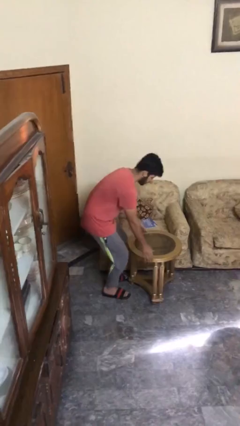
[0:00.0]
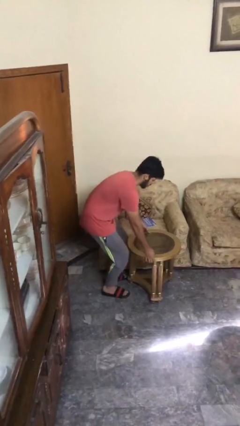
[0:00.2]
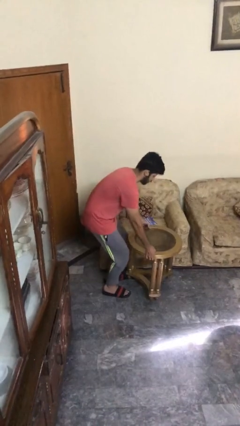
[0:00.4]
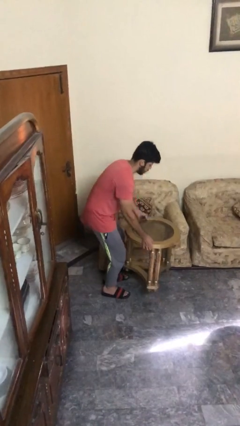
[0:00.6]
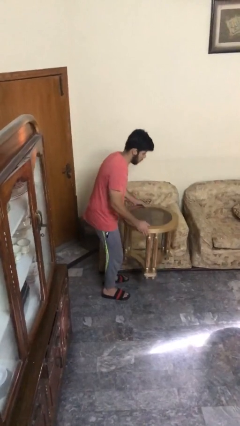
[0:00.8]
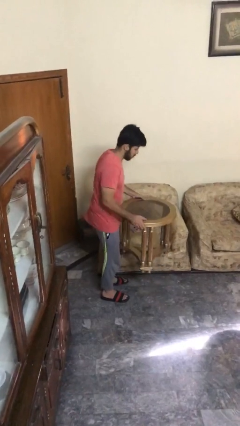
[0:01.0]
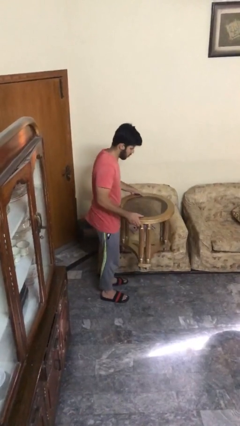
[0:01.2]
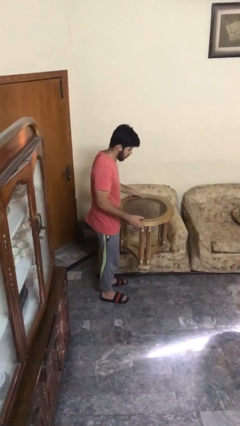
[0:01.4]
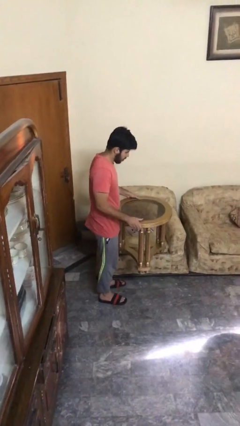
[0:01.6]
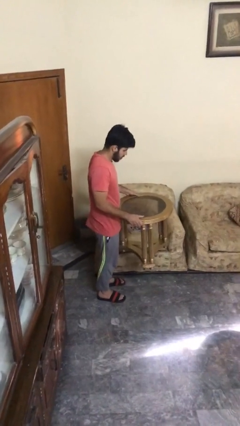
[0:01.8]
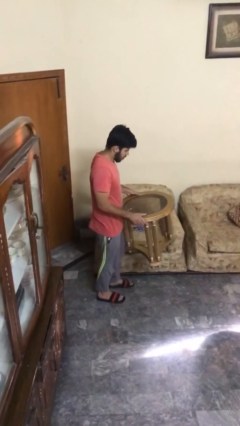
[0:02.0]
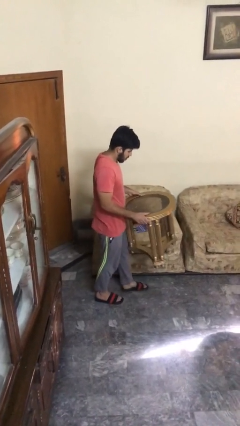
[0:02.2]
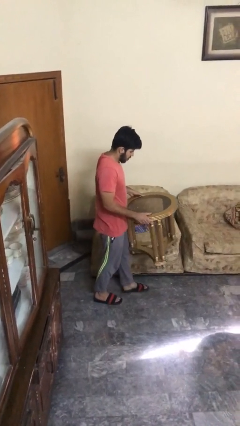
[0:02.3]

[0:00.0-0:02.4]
person picks up object from floor

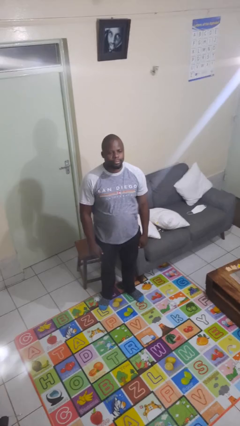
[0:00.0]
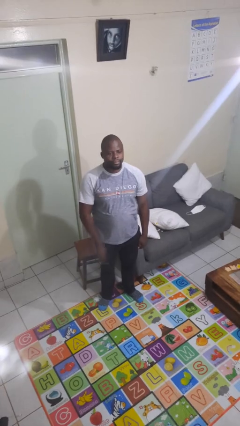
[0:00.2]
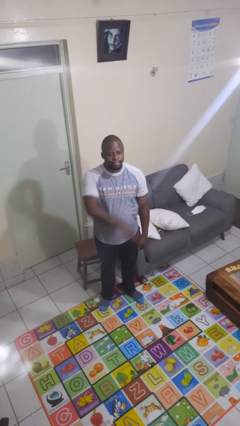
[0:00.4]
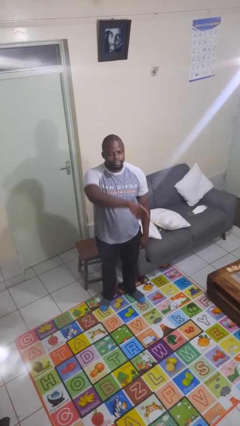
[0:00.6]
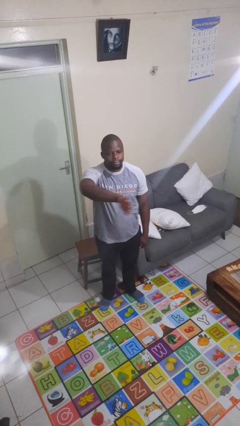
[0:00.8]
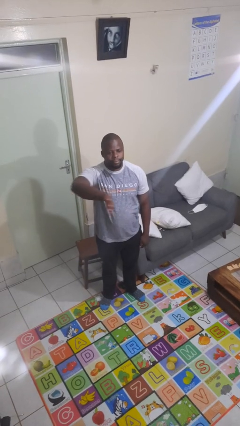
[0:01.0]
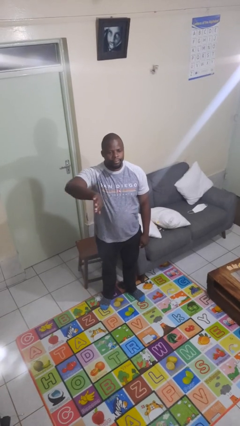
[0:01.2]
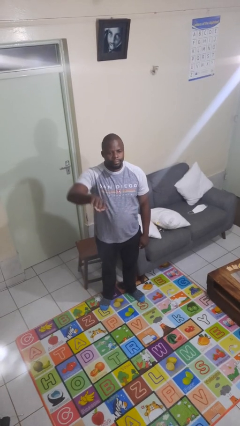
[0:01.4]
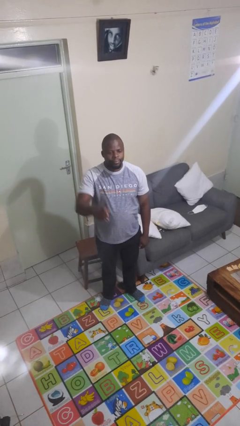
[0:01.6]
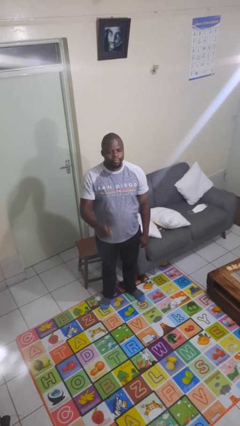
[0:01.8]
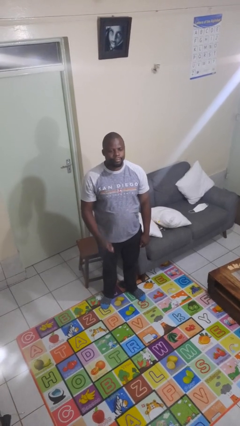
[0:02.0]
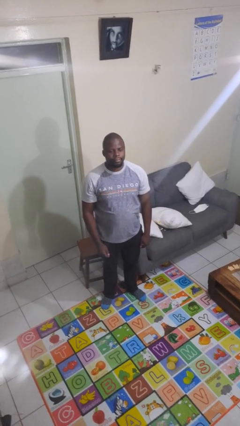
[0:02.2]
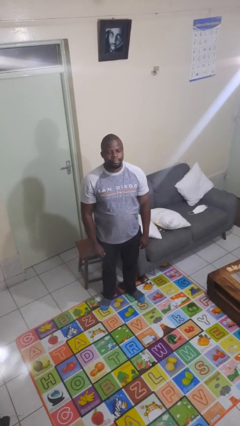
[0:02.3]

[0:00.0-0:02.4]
person gestures swipe right

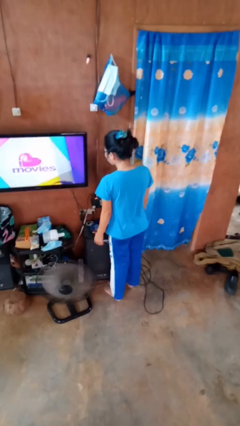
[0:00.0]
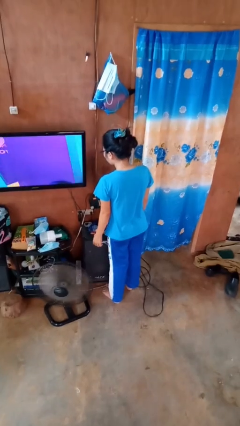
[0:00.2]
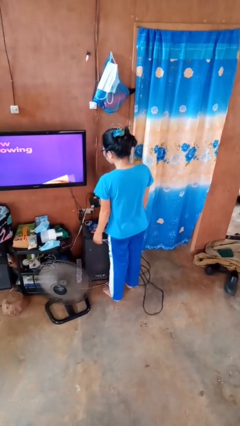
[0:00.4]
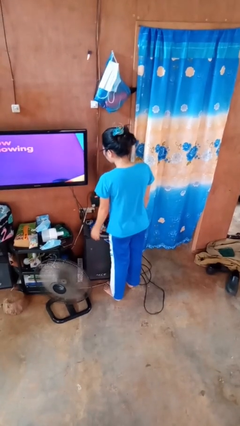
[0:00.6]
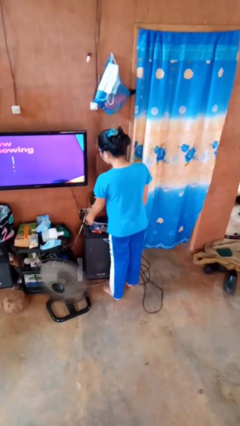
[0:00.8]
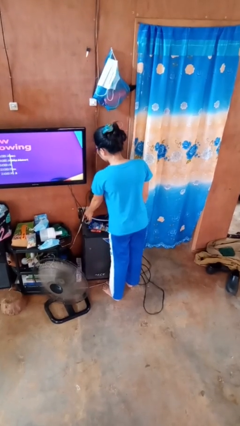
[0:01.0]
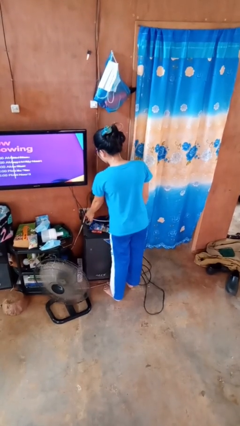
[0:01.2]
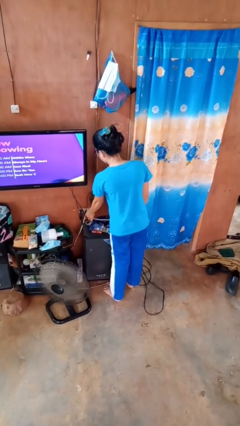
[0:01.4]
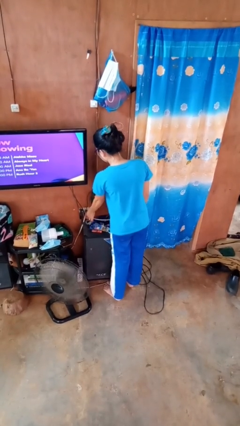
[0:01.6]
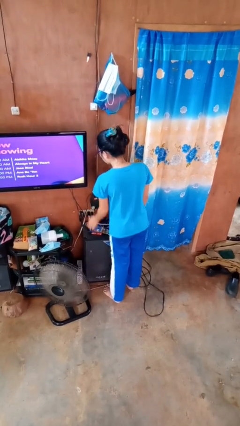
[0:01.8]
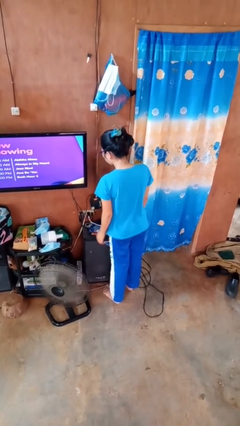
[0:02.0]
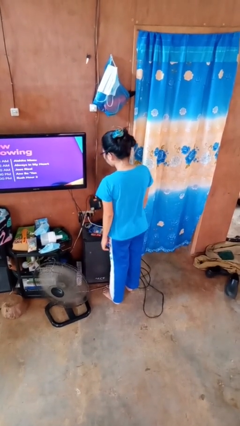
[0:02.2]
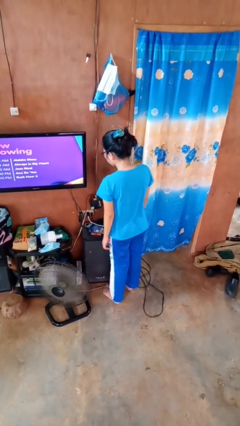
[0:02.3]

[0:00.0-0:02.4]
person plugs into electrical socket

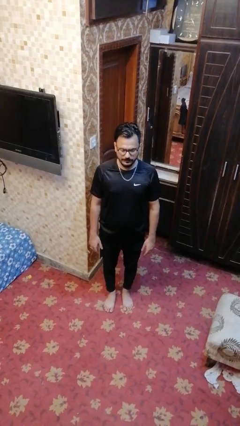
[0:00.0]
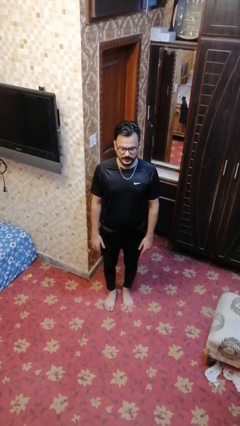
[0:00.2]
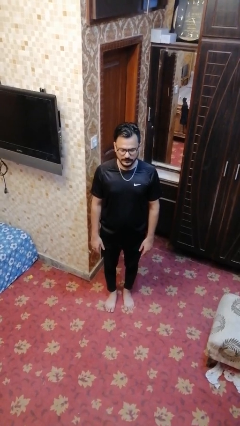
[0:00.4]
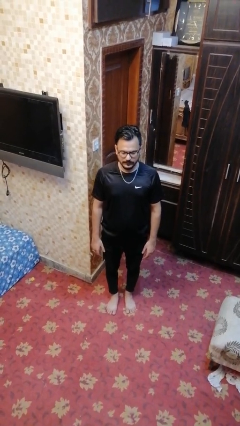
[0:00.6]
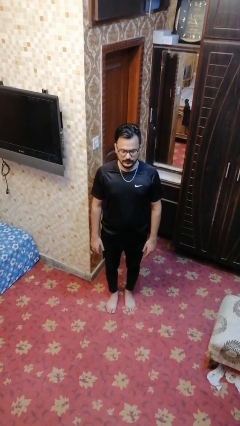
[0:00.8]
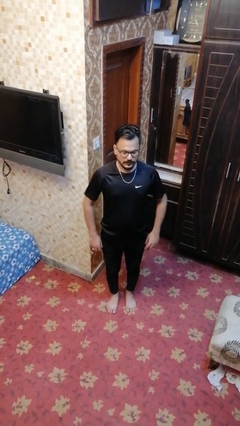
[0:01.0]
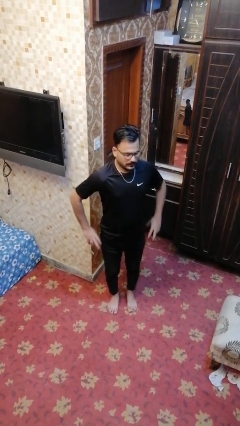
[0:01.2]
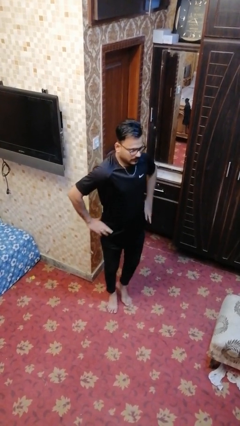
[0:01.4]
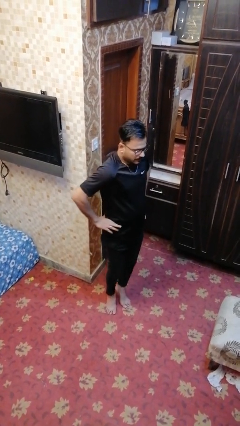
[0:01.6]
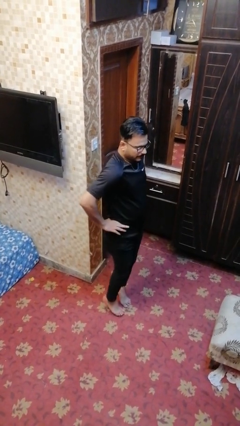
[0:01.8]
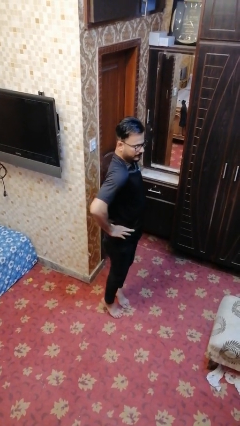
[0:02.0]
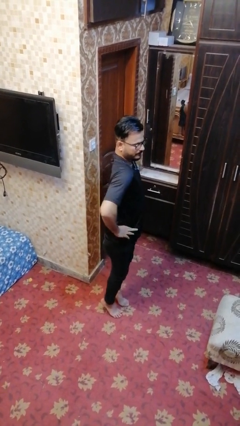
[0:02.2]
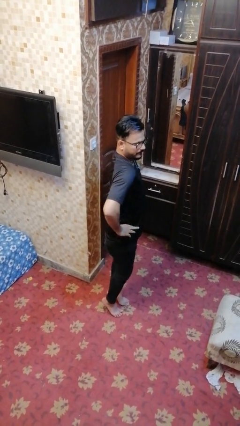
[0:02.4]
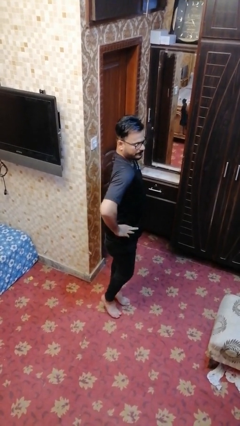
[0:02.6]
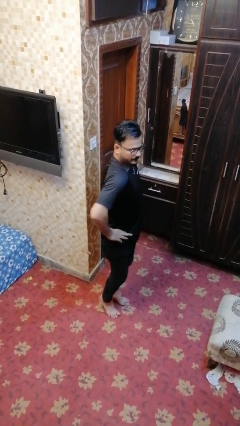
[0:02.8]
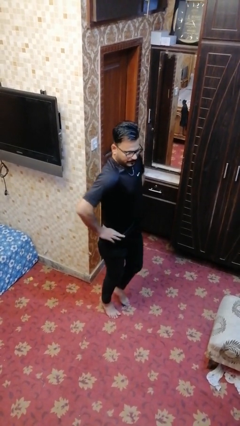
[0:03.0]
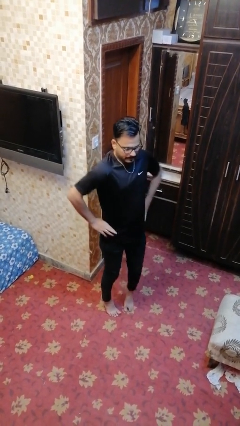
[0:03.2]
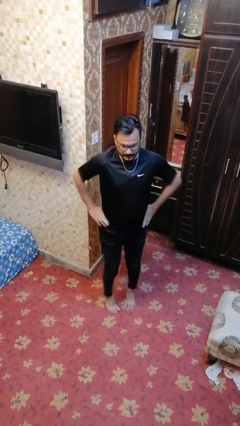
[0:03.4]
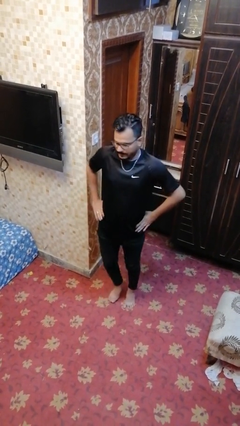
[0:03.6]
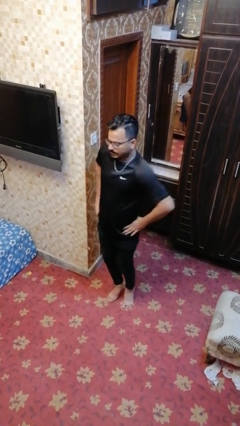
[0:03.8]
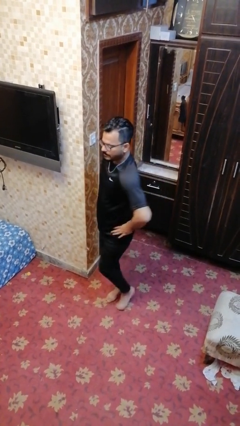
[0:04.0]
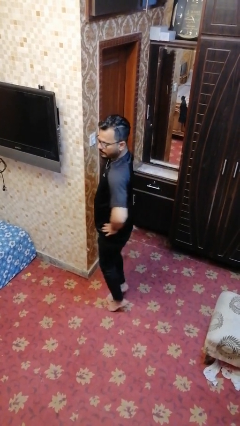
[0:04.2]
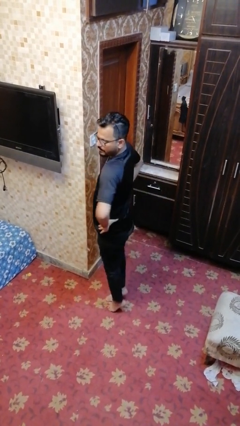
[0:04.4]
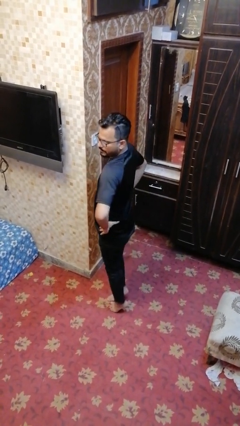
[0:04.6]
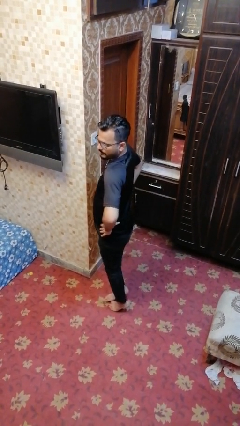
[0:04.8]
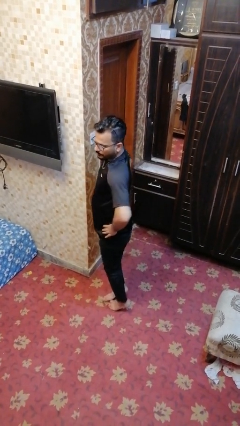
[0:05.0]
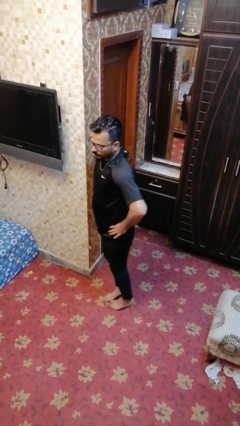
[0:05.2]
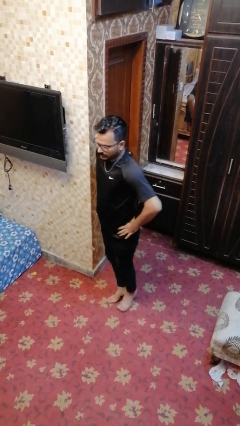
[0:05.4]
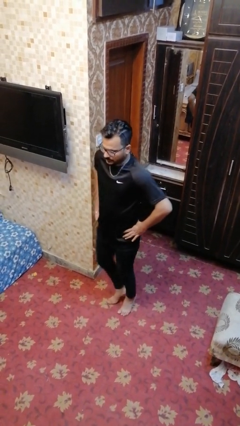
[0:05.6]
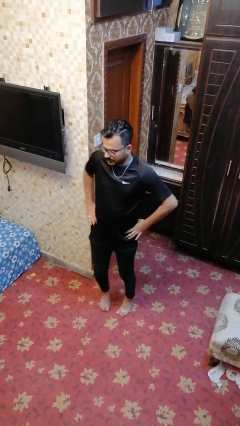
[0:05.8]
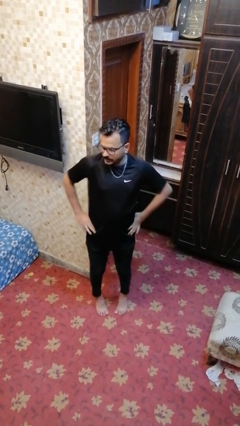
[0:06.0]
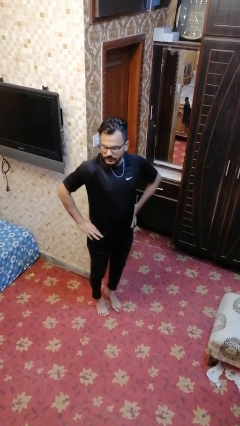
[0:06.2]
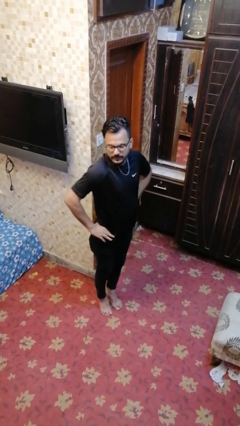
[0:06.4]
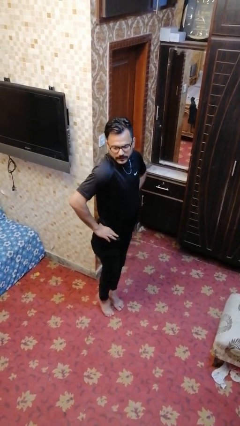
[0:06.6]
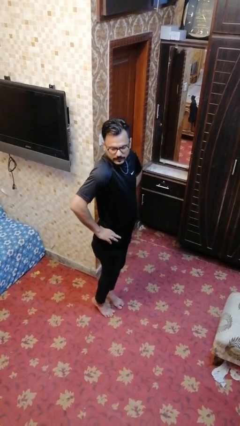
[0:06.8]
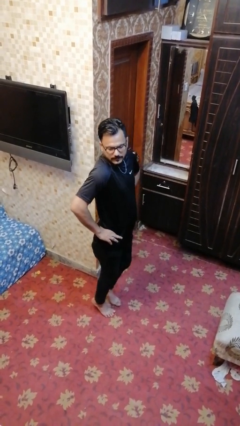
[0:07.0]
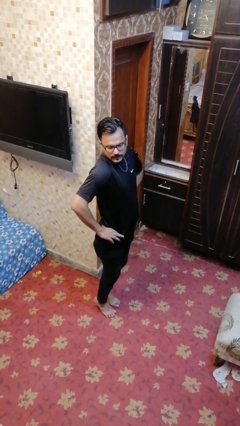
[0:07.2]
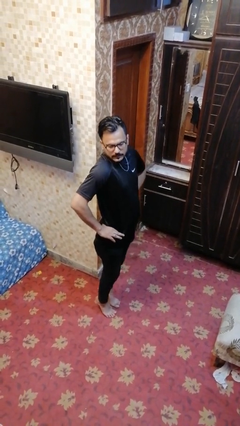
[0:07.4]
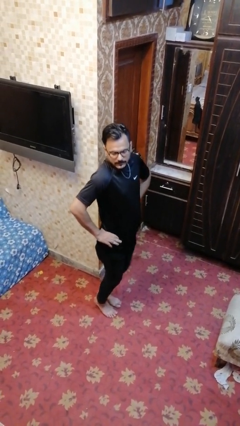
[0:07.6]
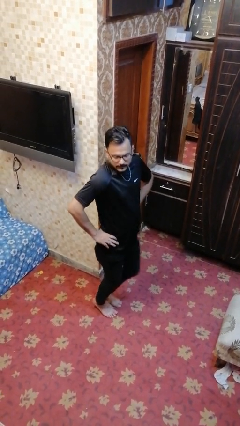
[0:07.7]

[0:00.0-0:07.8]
person walks tiptoe

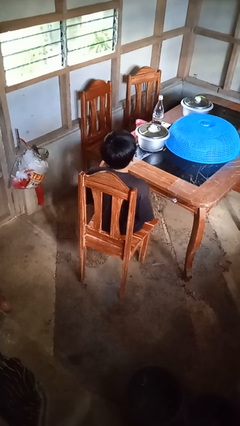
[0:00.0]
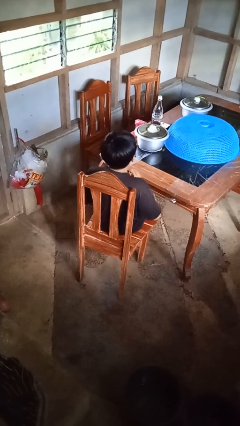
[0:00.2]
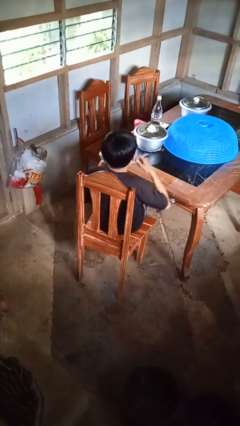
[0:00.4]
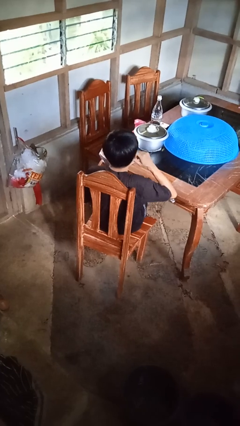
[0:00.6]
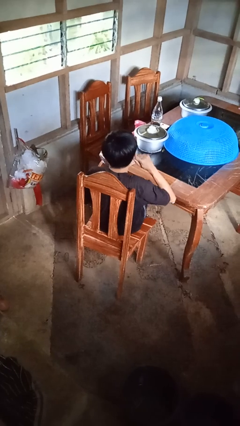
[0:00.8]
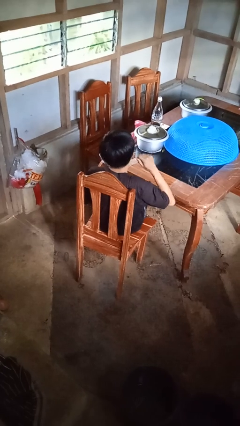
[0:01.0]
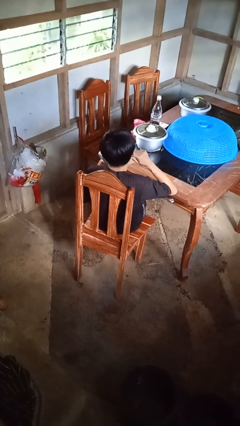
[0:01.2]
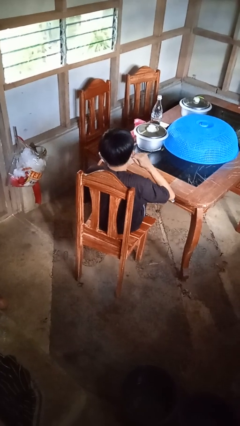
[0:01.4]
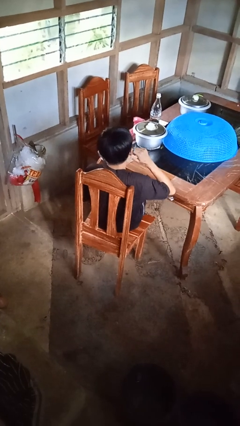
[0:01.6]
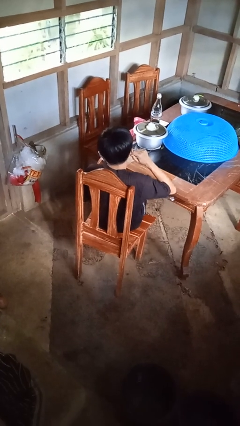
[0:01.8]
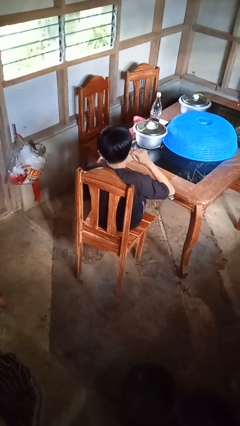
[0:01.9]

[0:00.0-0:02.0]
person touches earlobe

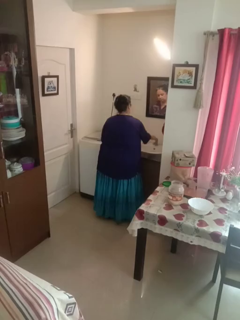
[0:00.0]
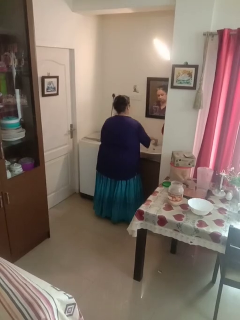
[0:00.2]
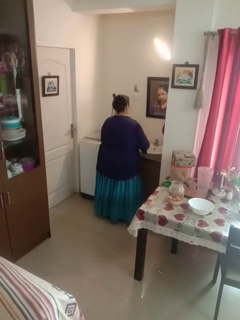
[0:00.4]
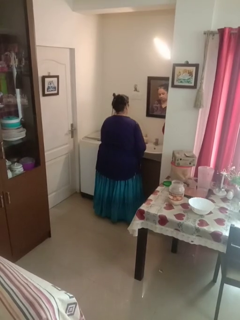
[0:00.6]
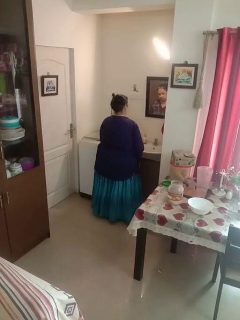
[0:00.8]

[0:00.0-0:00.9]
person turns off faucet
